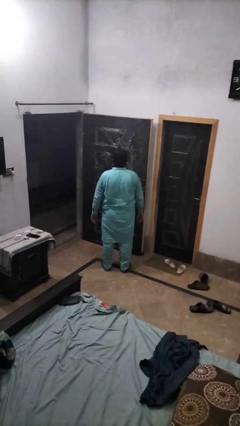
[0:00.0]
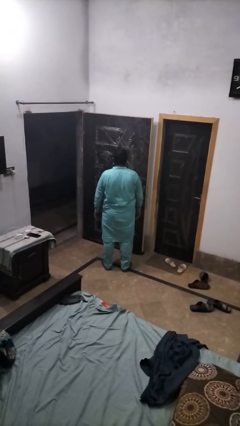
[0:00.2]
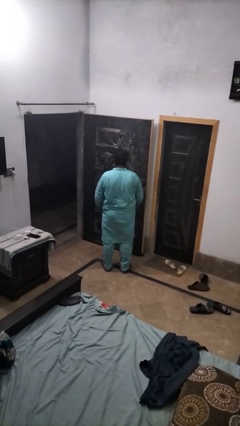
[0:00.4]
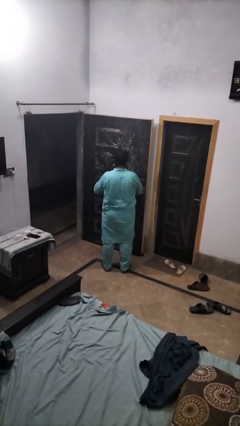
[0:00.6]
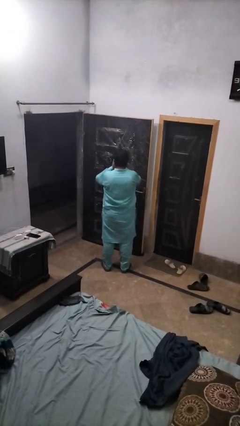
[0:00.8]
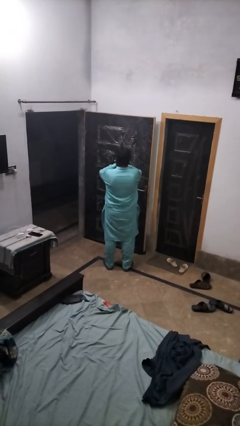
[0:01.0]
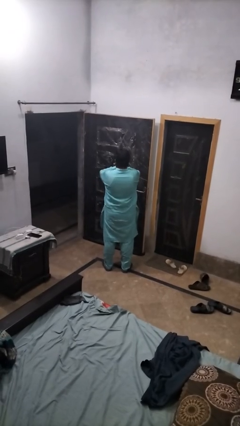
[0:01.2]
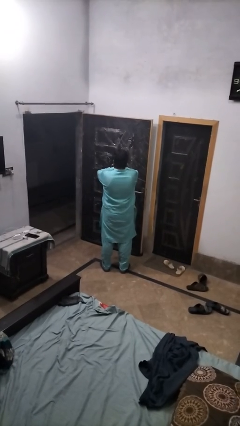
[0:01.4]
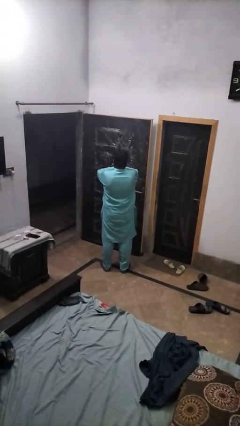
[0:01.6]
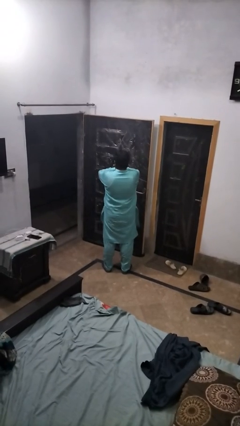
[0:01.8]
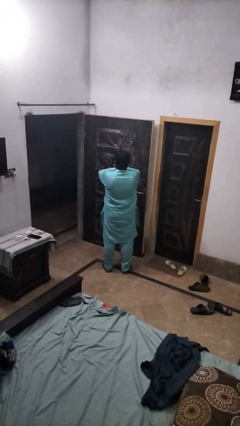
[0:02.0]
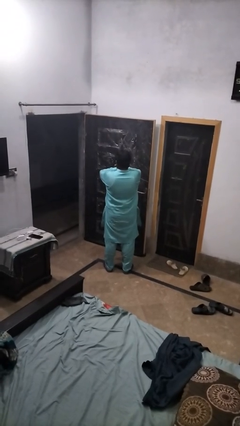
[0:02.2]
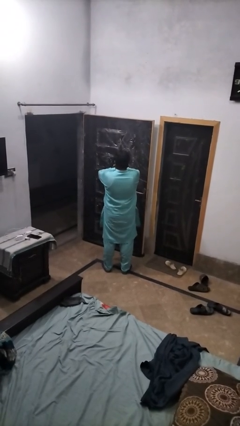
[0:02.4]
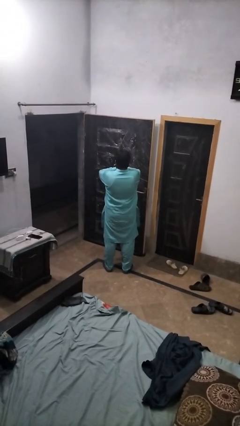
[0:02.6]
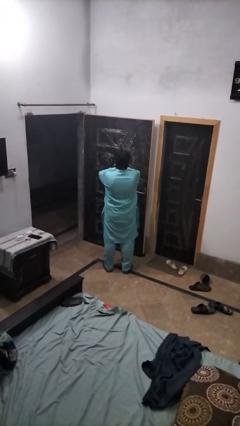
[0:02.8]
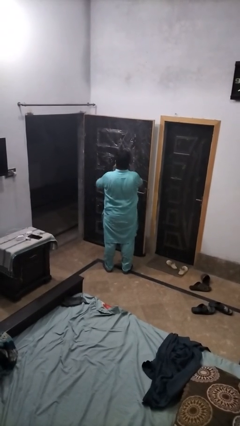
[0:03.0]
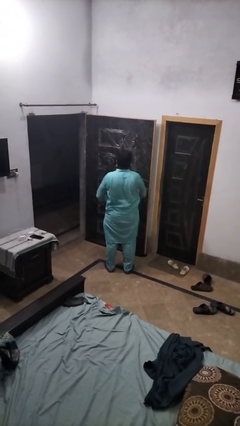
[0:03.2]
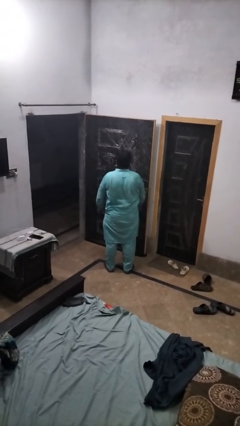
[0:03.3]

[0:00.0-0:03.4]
person yawns

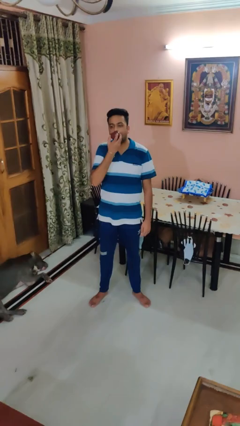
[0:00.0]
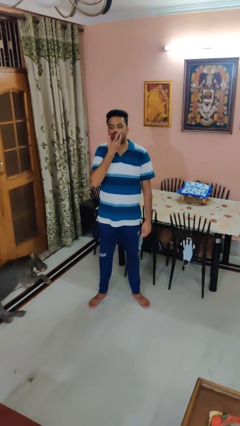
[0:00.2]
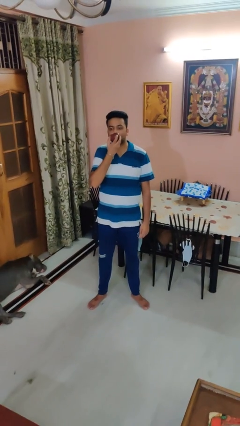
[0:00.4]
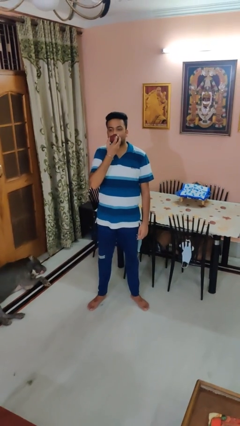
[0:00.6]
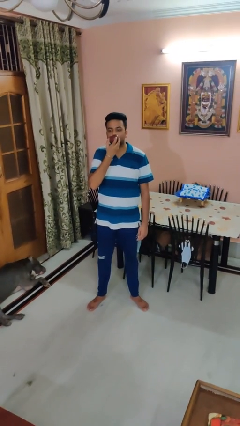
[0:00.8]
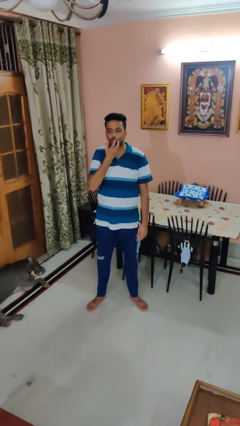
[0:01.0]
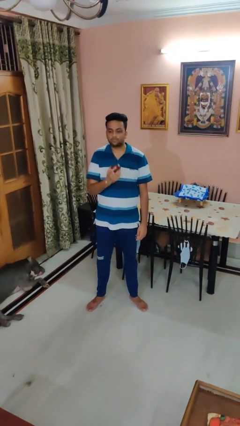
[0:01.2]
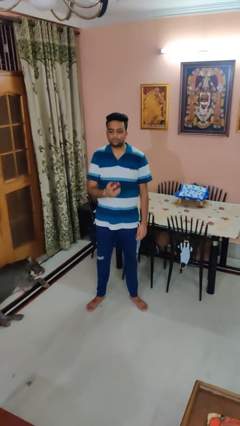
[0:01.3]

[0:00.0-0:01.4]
person eats apple

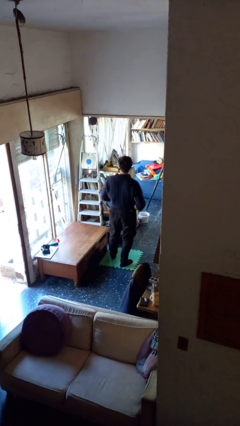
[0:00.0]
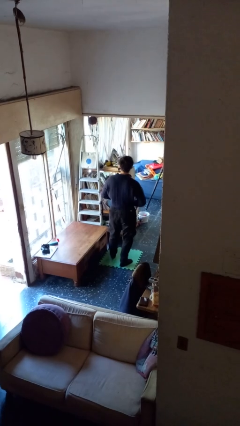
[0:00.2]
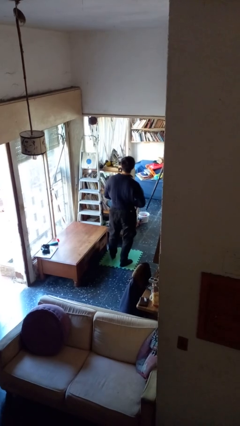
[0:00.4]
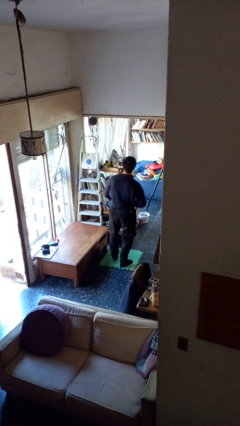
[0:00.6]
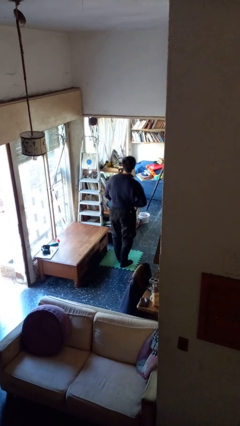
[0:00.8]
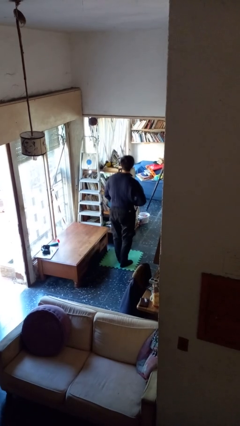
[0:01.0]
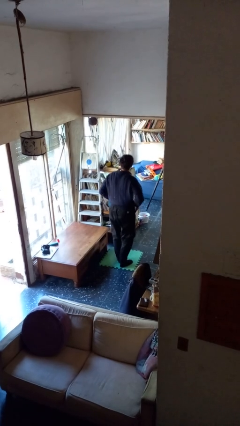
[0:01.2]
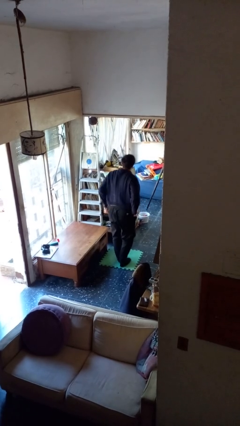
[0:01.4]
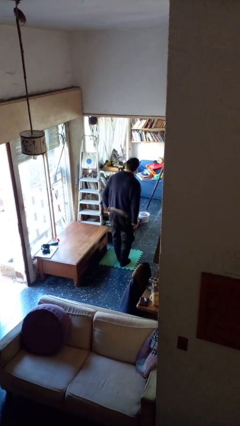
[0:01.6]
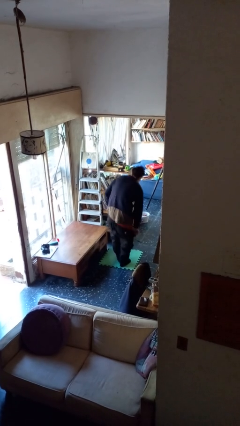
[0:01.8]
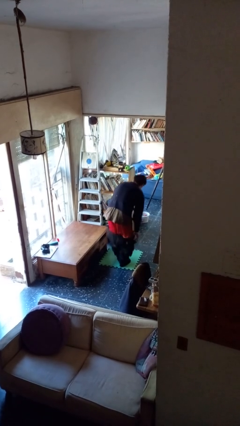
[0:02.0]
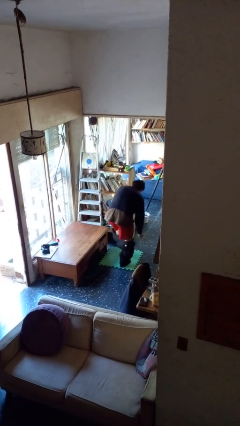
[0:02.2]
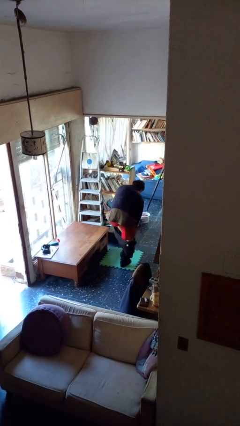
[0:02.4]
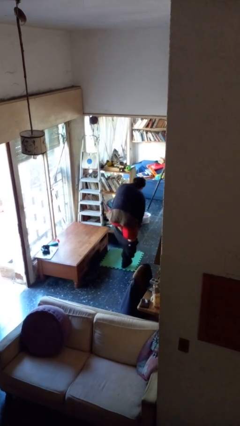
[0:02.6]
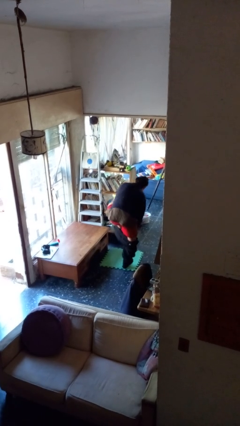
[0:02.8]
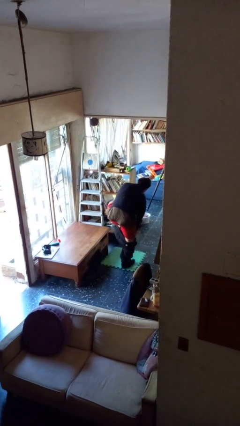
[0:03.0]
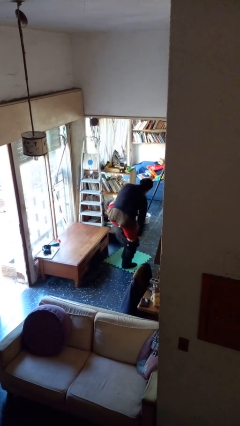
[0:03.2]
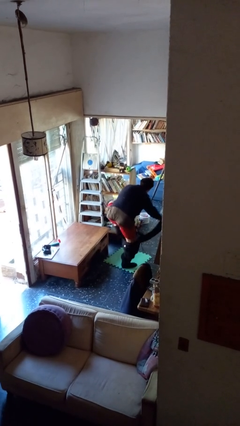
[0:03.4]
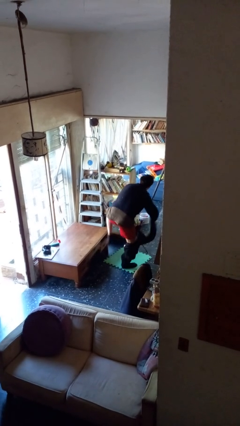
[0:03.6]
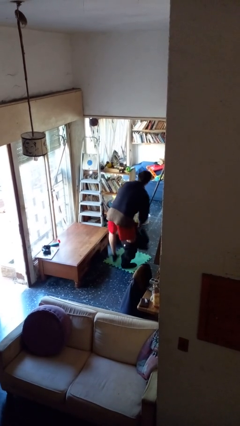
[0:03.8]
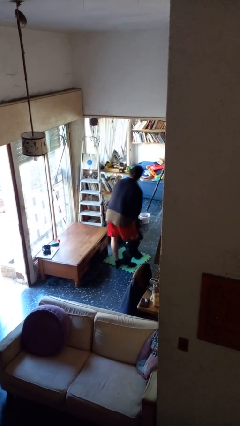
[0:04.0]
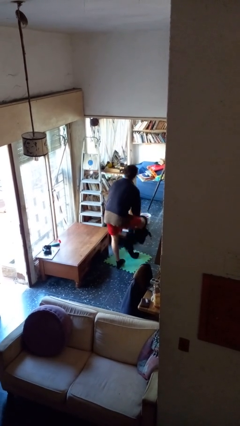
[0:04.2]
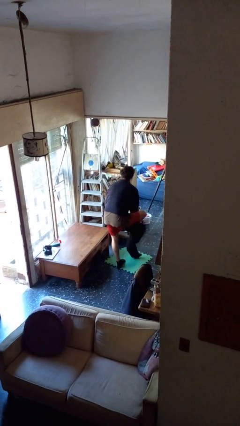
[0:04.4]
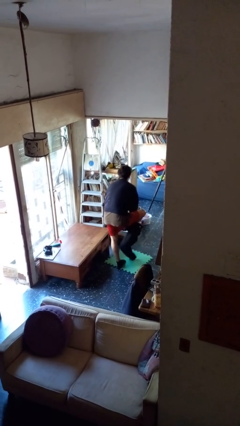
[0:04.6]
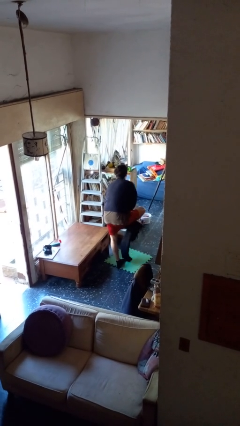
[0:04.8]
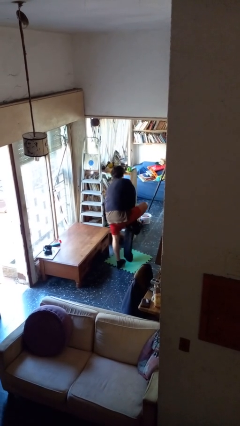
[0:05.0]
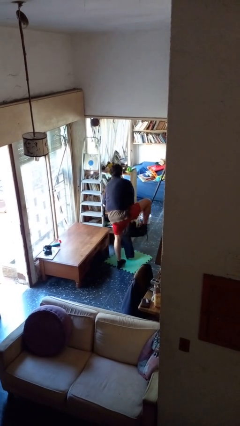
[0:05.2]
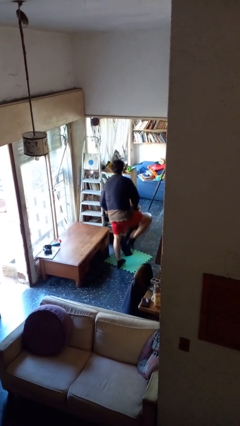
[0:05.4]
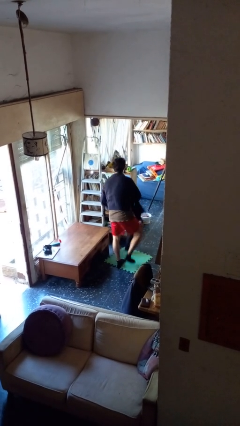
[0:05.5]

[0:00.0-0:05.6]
person takes off pants

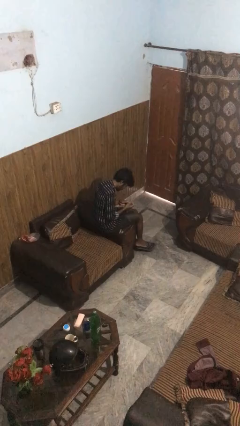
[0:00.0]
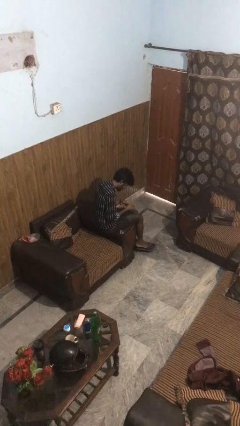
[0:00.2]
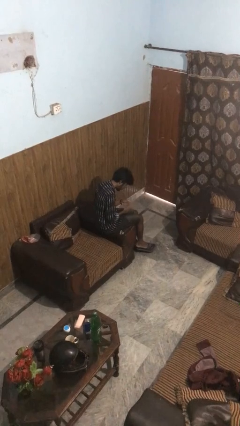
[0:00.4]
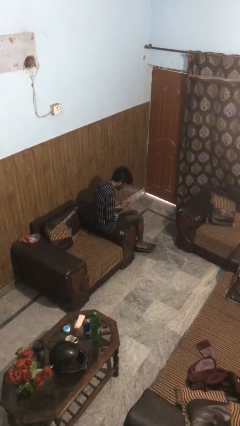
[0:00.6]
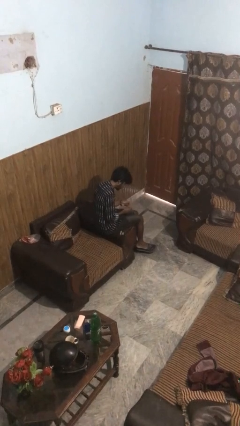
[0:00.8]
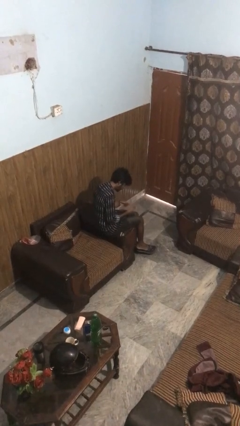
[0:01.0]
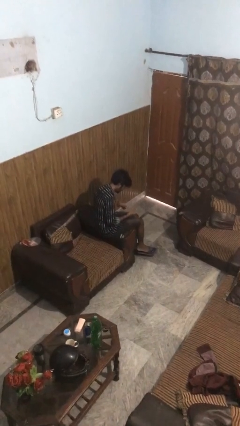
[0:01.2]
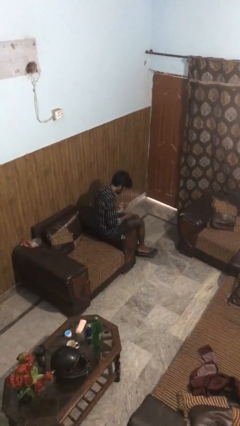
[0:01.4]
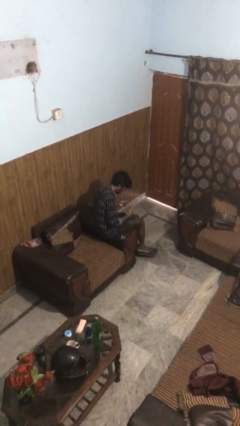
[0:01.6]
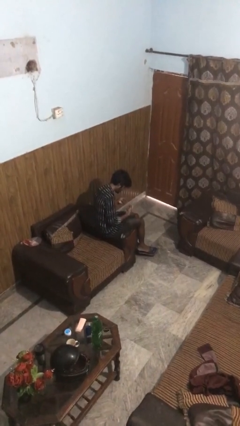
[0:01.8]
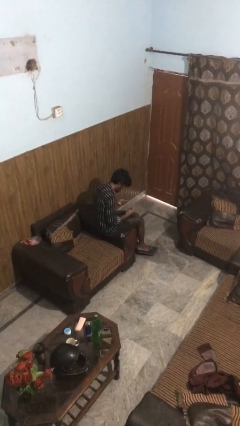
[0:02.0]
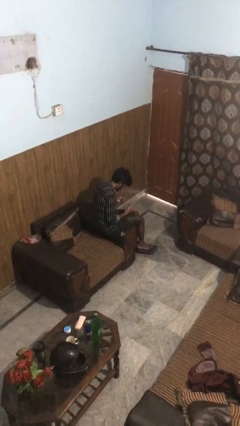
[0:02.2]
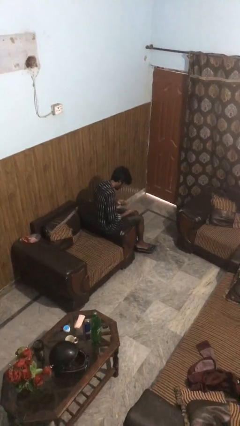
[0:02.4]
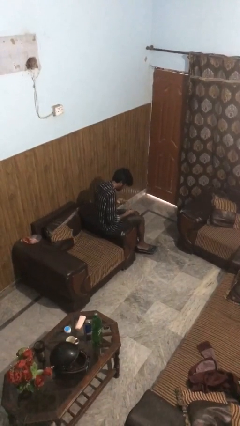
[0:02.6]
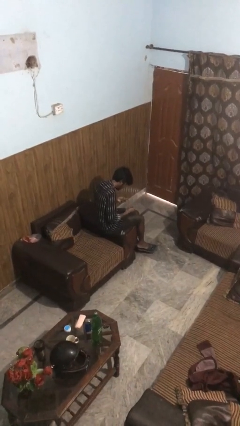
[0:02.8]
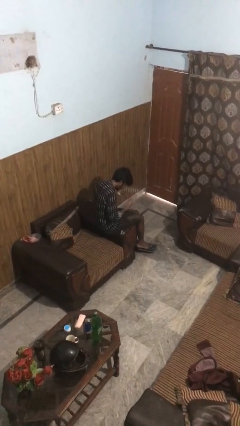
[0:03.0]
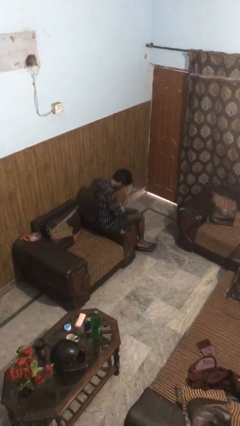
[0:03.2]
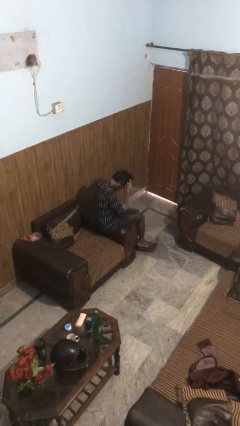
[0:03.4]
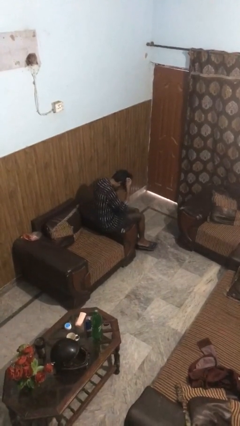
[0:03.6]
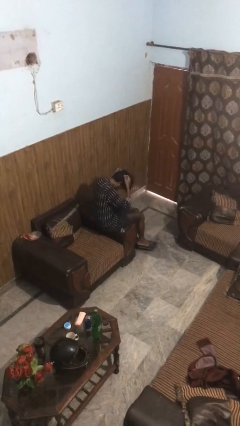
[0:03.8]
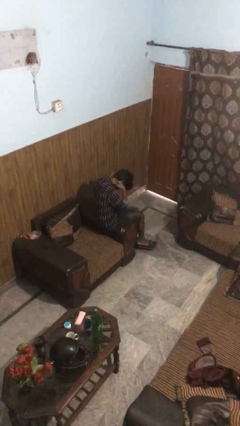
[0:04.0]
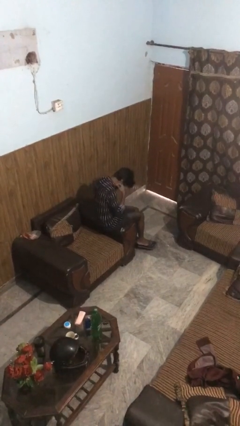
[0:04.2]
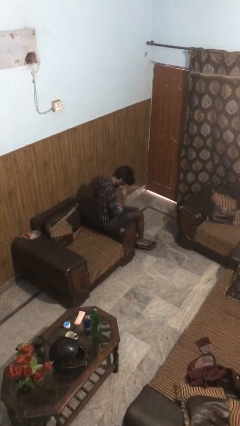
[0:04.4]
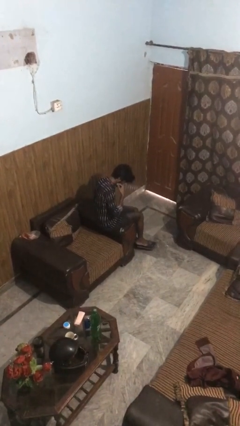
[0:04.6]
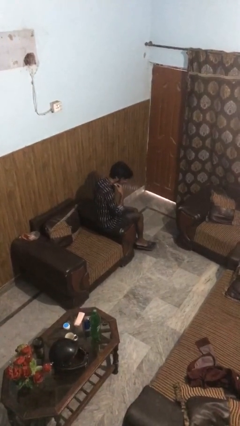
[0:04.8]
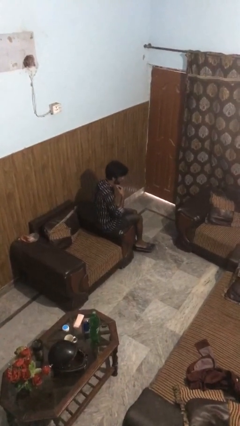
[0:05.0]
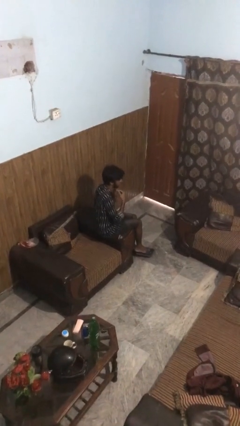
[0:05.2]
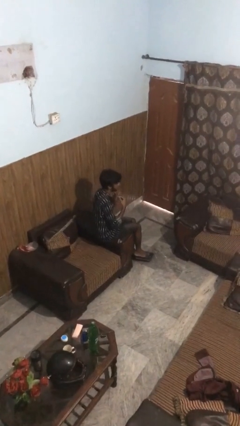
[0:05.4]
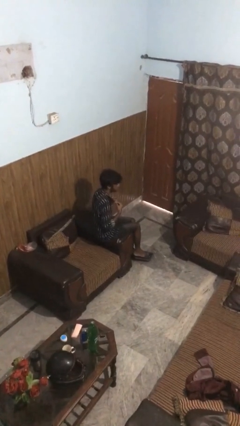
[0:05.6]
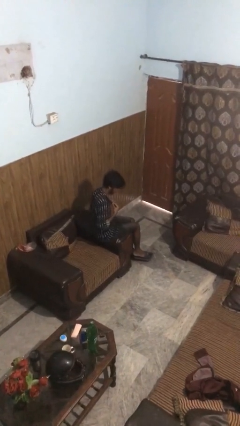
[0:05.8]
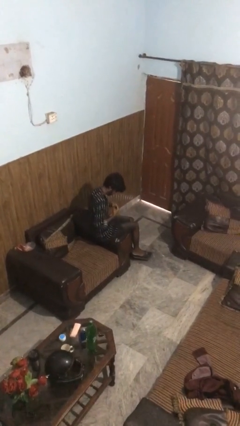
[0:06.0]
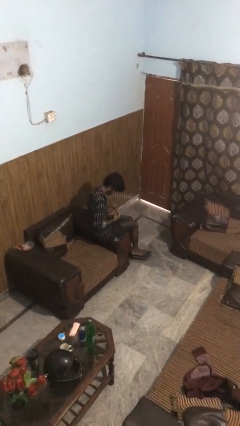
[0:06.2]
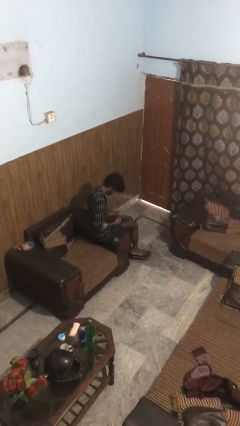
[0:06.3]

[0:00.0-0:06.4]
person puts on necklace

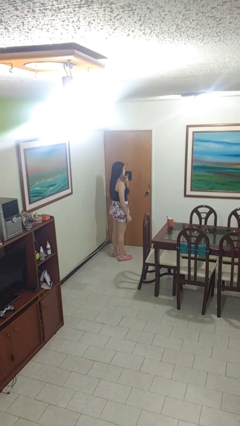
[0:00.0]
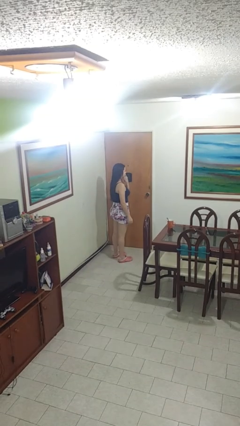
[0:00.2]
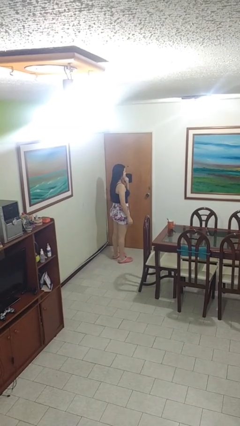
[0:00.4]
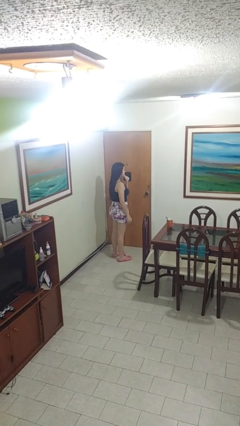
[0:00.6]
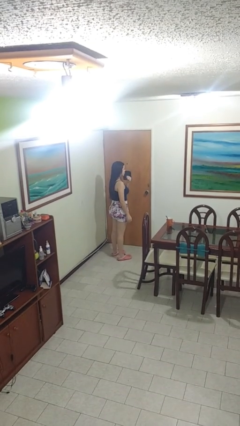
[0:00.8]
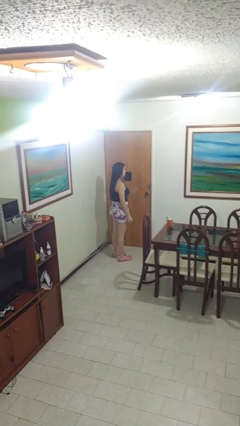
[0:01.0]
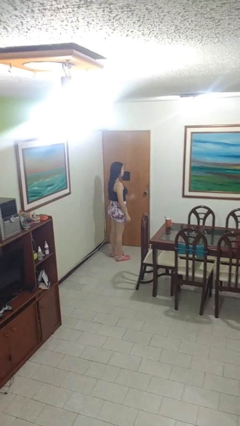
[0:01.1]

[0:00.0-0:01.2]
person strokes chin
